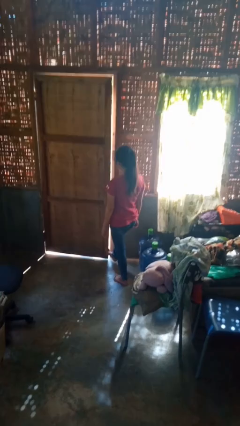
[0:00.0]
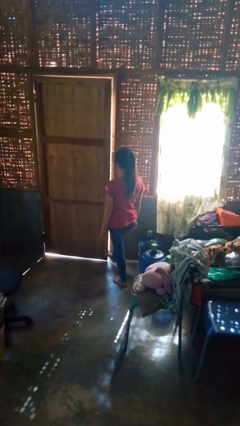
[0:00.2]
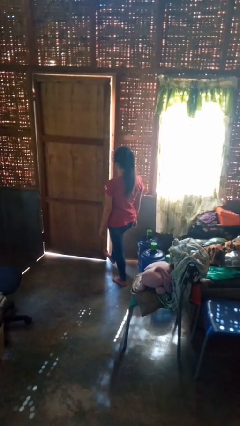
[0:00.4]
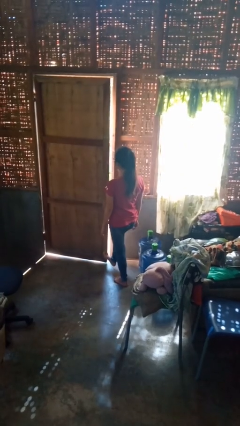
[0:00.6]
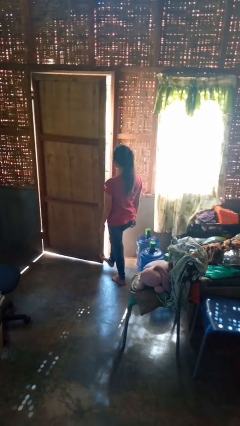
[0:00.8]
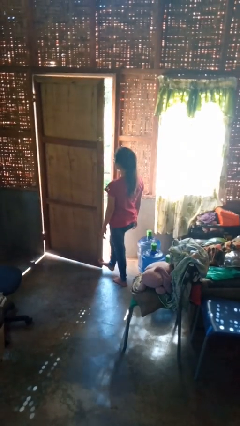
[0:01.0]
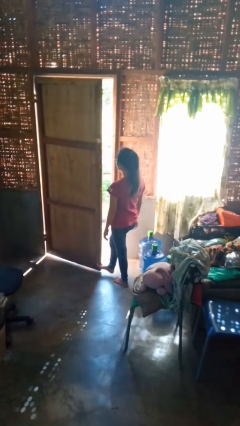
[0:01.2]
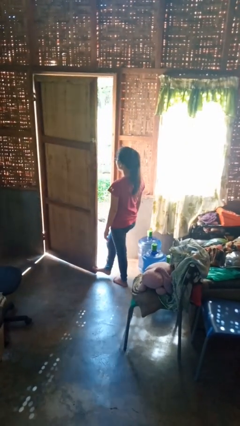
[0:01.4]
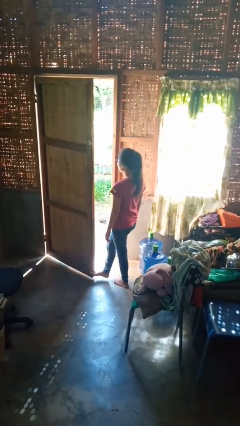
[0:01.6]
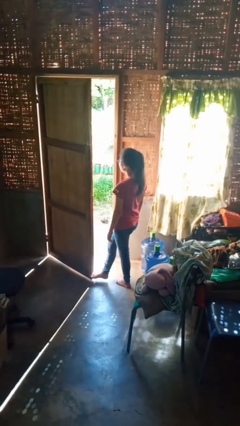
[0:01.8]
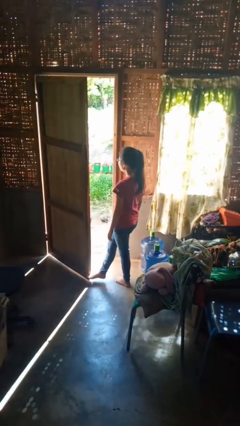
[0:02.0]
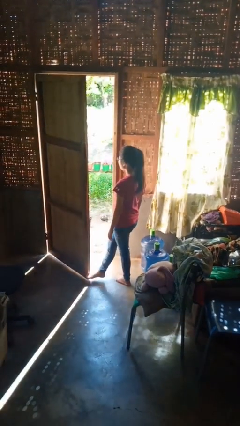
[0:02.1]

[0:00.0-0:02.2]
person opens facility door

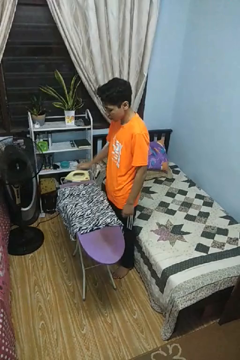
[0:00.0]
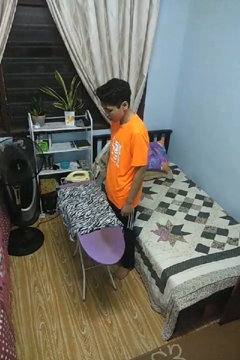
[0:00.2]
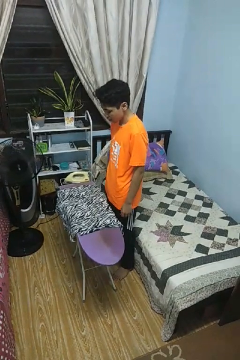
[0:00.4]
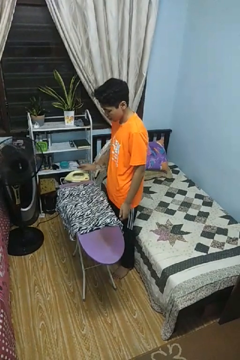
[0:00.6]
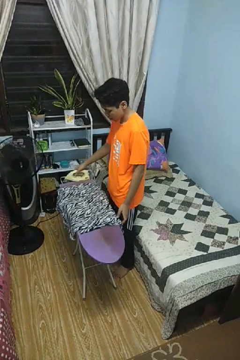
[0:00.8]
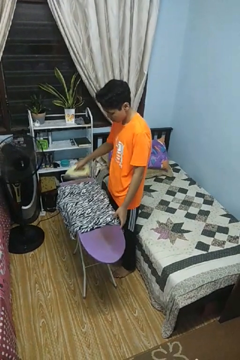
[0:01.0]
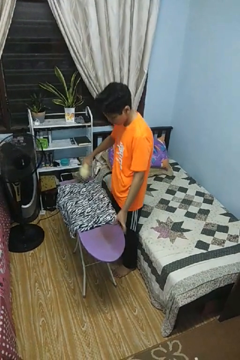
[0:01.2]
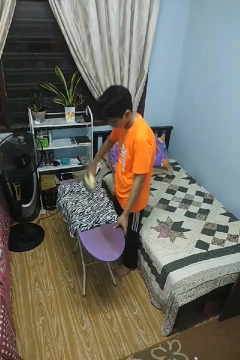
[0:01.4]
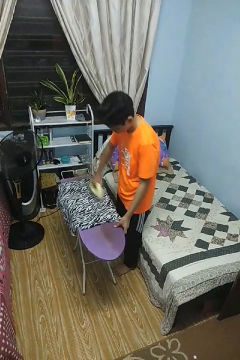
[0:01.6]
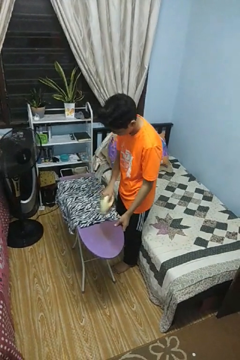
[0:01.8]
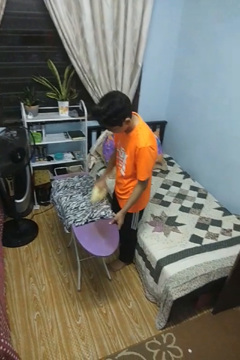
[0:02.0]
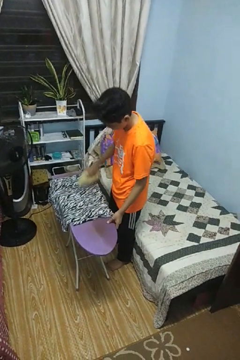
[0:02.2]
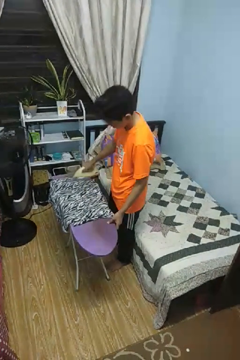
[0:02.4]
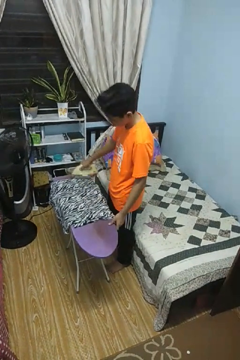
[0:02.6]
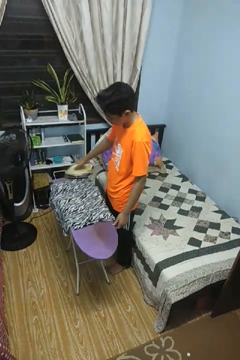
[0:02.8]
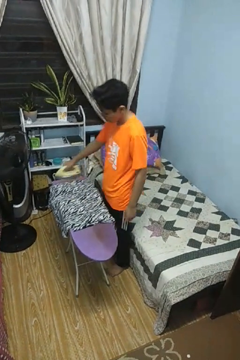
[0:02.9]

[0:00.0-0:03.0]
person irons clothes

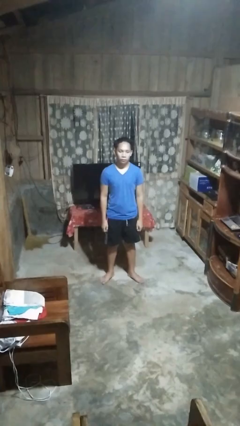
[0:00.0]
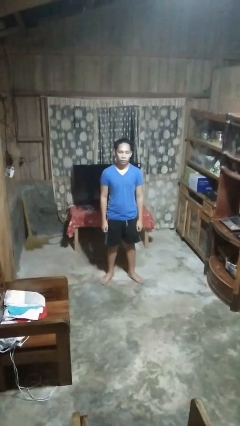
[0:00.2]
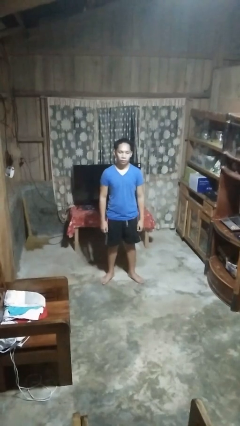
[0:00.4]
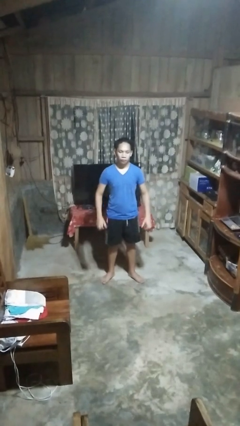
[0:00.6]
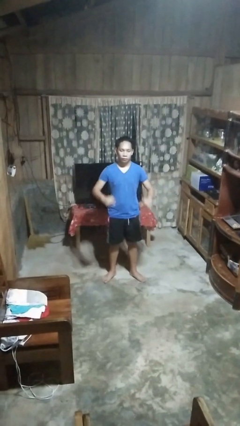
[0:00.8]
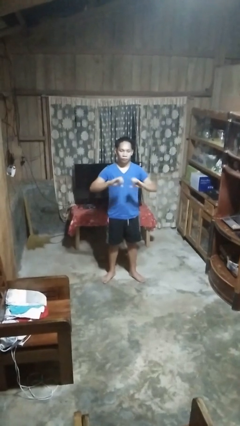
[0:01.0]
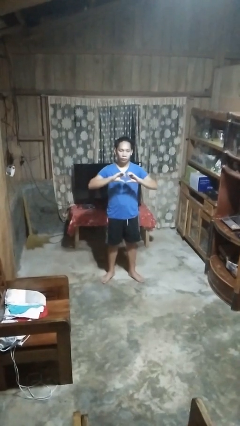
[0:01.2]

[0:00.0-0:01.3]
person gestures heart

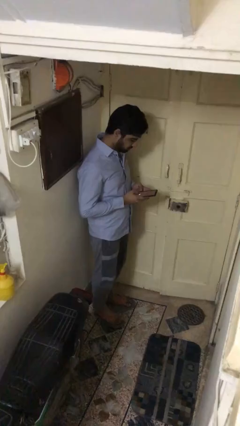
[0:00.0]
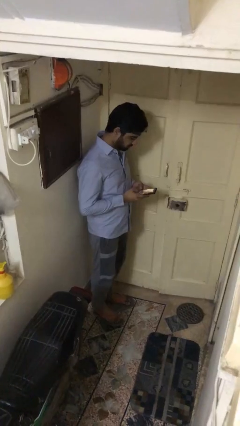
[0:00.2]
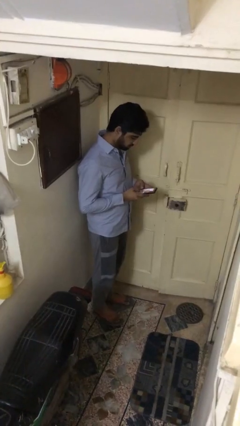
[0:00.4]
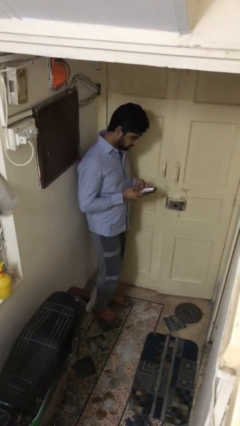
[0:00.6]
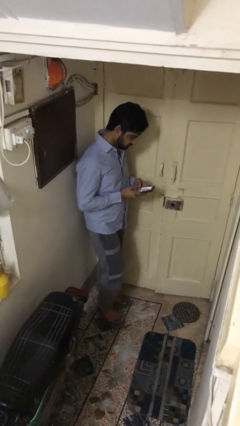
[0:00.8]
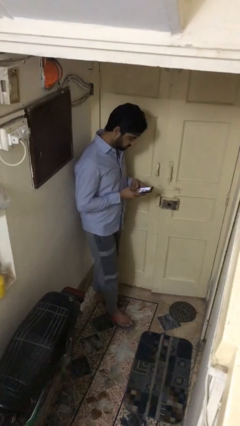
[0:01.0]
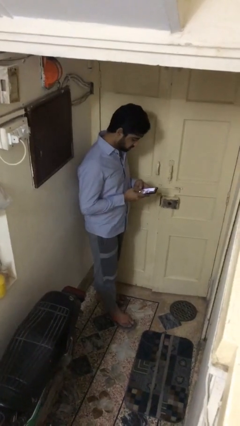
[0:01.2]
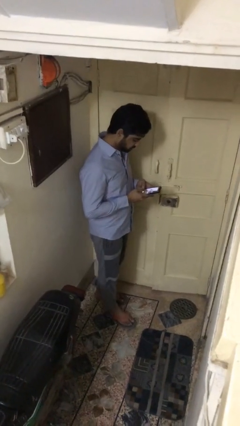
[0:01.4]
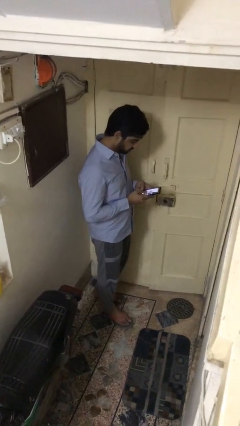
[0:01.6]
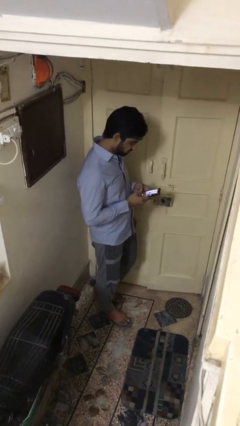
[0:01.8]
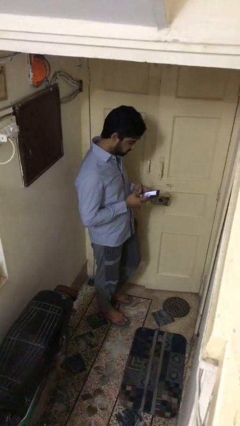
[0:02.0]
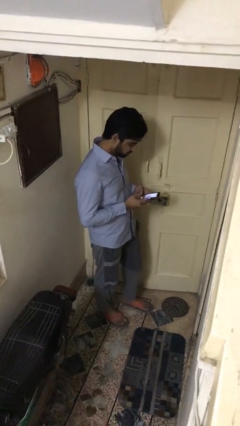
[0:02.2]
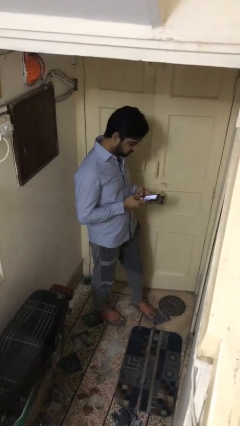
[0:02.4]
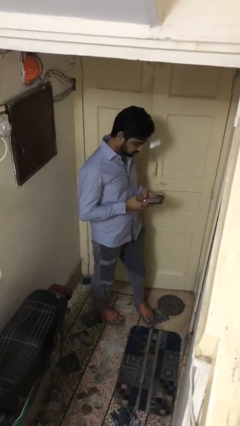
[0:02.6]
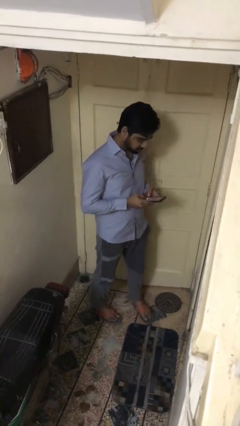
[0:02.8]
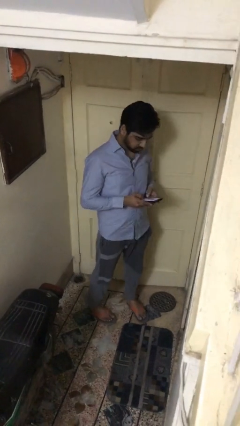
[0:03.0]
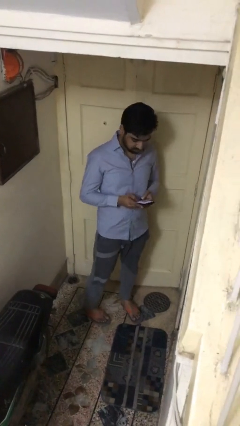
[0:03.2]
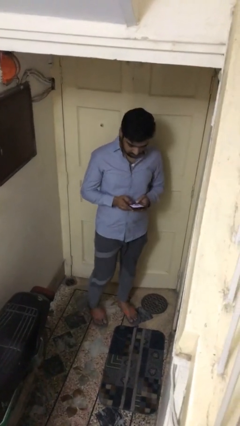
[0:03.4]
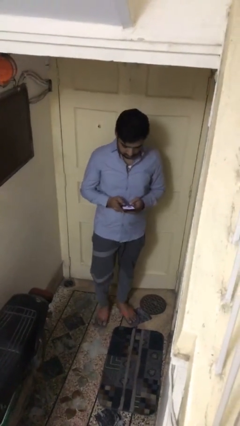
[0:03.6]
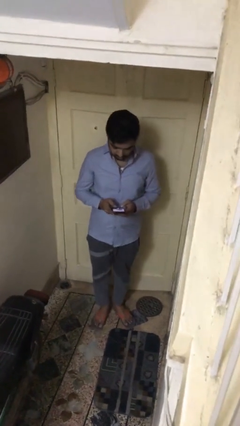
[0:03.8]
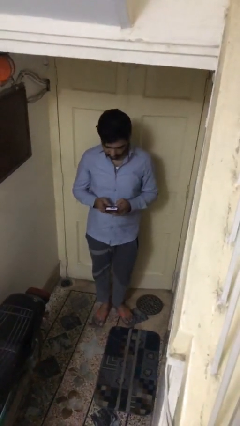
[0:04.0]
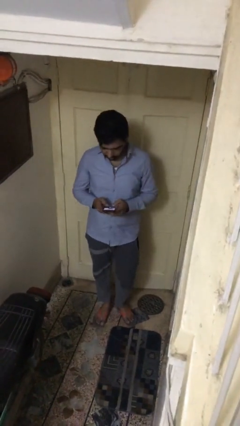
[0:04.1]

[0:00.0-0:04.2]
person texts on phone

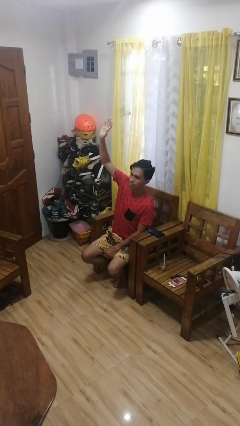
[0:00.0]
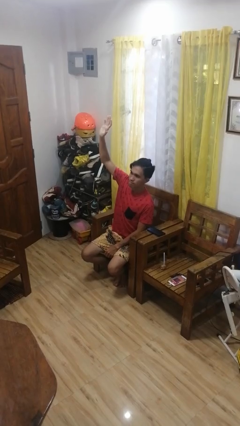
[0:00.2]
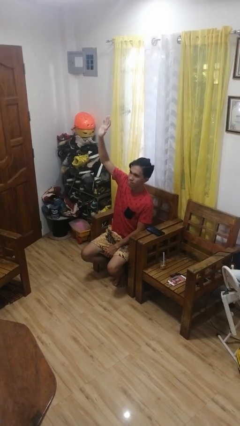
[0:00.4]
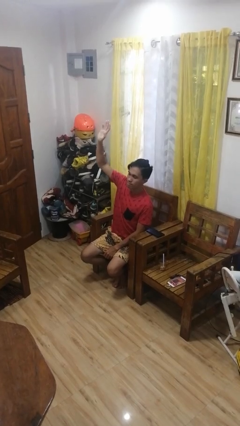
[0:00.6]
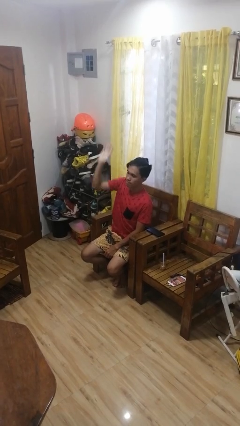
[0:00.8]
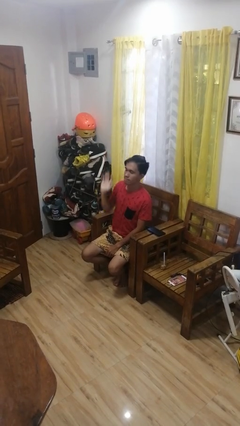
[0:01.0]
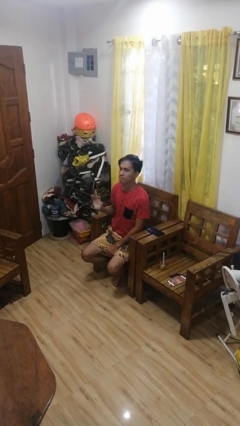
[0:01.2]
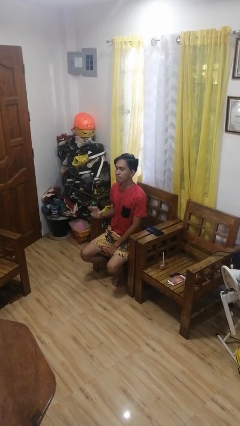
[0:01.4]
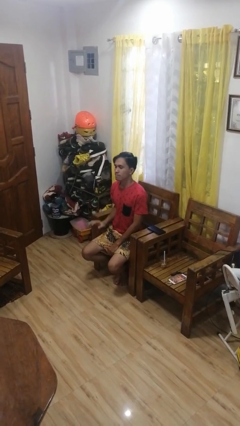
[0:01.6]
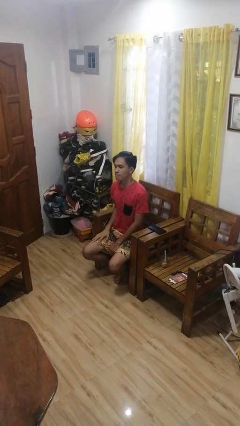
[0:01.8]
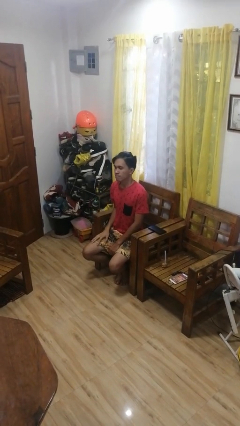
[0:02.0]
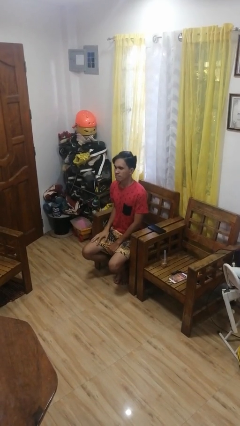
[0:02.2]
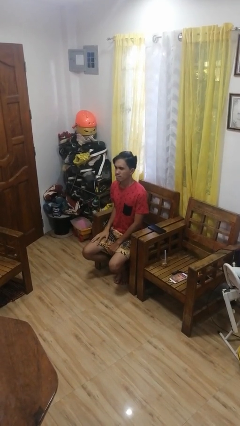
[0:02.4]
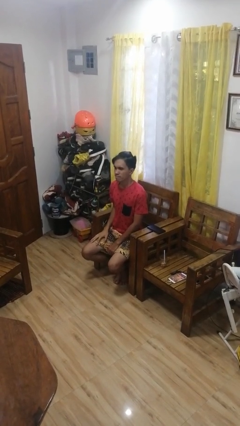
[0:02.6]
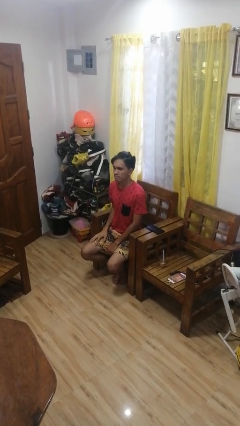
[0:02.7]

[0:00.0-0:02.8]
person gestures lower hand

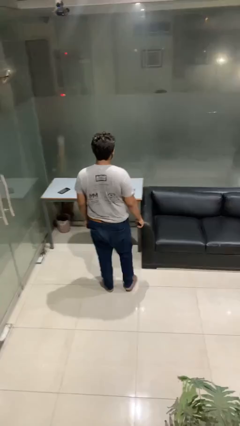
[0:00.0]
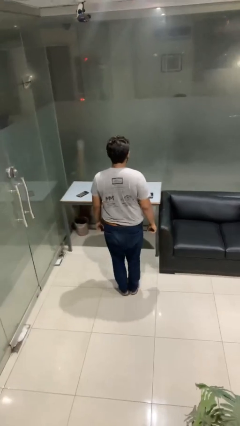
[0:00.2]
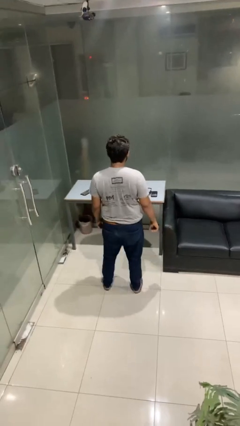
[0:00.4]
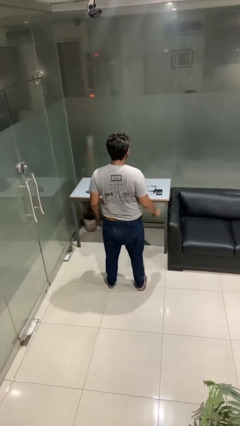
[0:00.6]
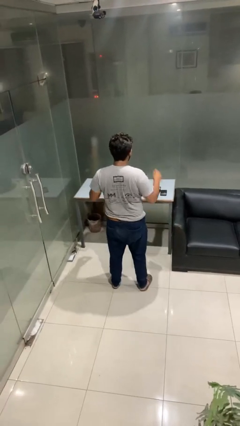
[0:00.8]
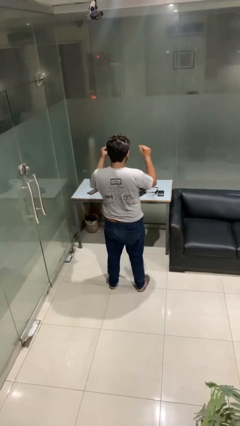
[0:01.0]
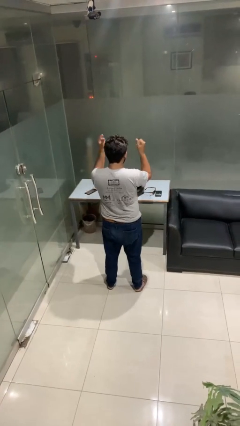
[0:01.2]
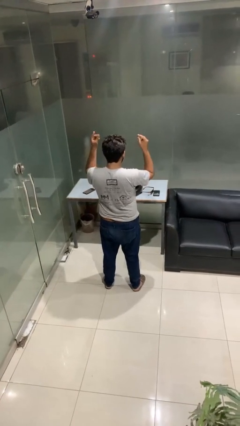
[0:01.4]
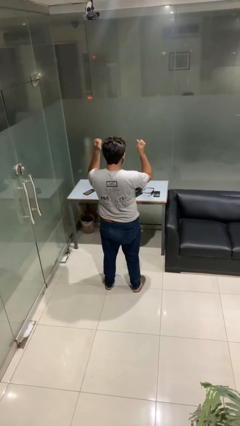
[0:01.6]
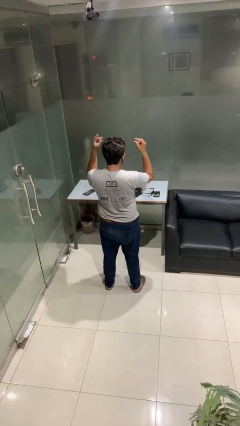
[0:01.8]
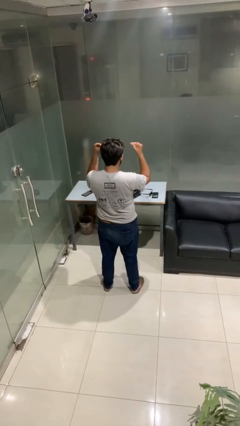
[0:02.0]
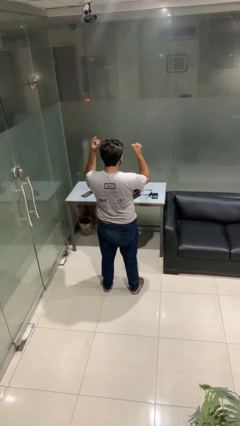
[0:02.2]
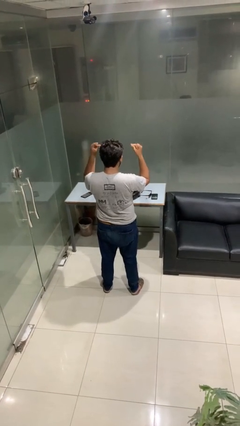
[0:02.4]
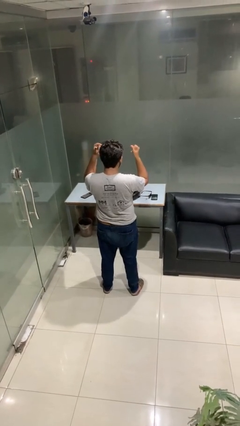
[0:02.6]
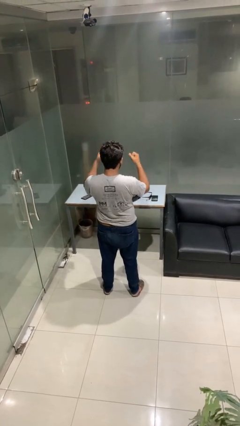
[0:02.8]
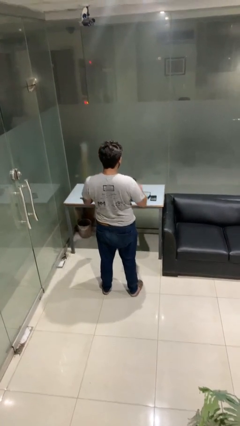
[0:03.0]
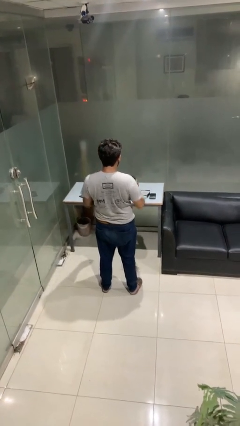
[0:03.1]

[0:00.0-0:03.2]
person snaps fingers

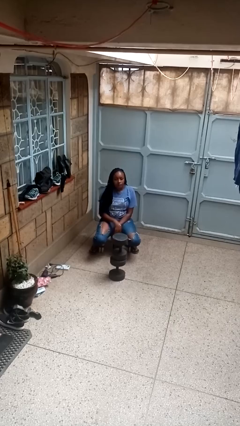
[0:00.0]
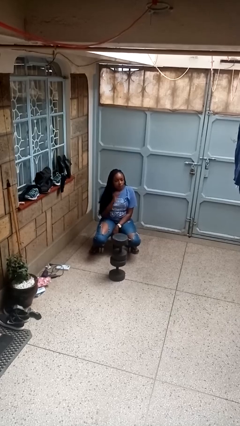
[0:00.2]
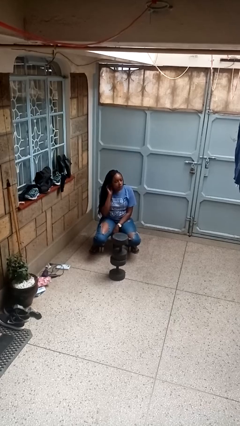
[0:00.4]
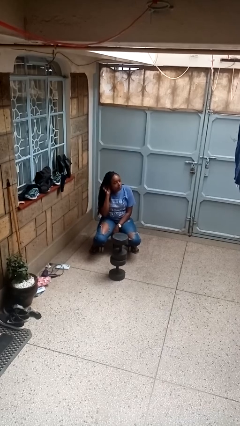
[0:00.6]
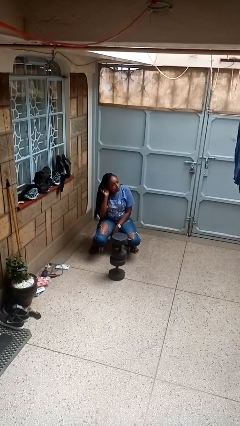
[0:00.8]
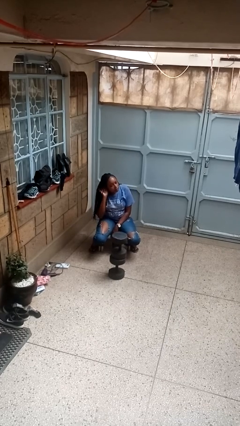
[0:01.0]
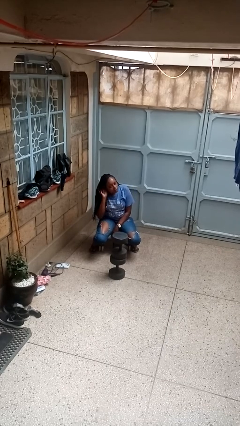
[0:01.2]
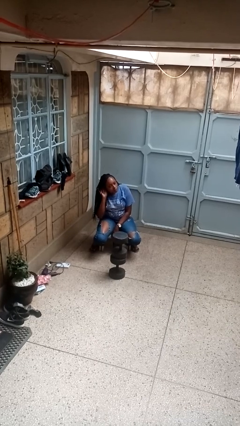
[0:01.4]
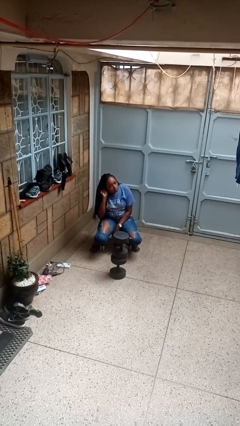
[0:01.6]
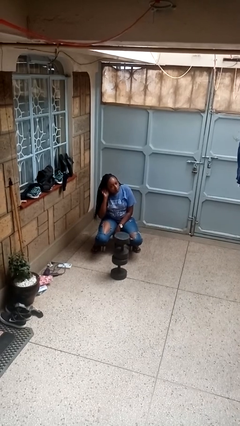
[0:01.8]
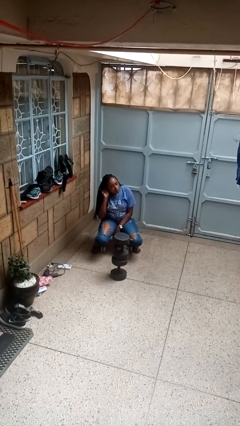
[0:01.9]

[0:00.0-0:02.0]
person gestures listen closely
